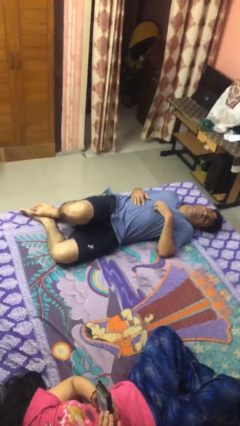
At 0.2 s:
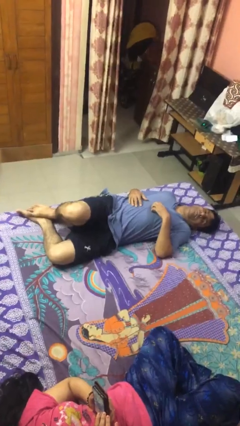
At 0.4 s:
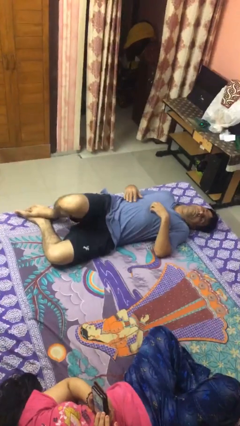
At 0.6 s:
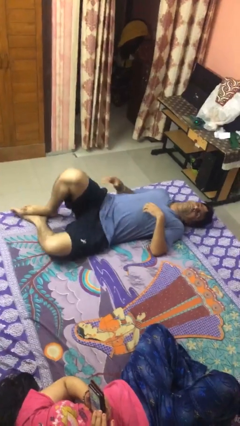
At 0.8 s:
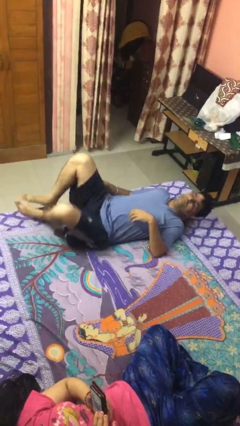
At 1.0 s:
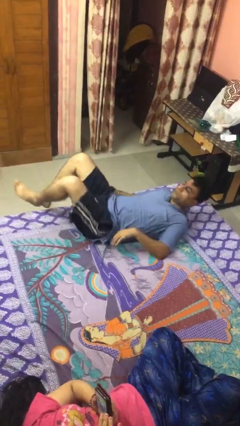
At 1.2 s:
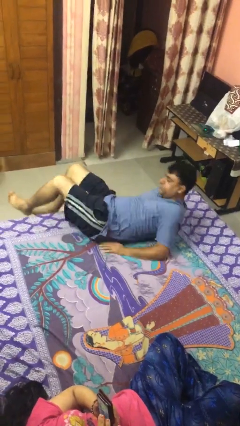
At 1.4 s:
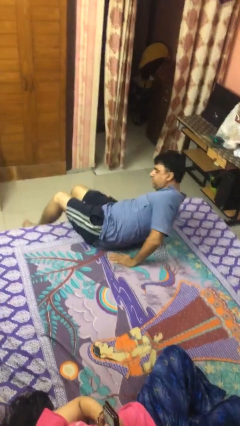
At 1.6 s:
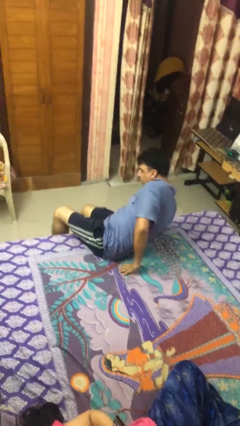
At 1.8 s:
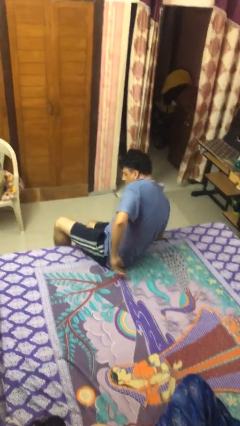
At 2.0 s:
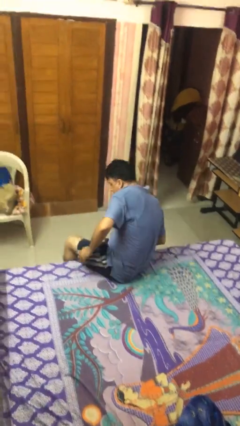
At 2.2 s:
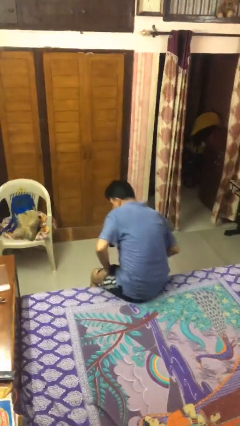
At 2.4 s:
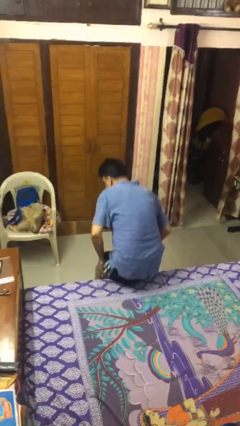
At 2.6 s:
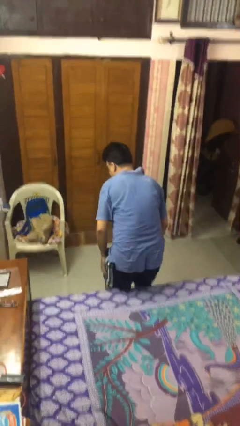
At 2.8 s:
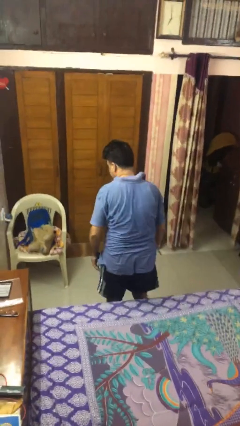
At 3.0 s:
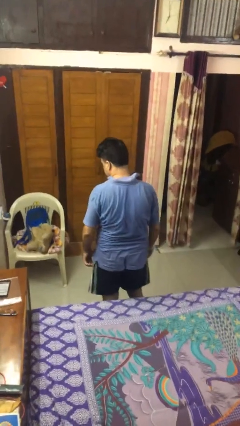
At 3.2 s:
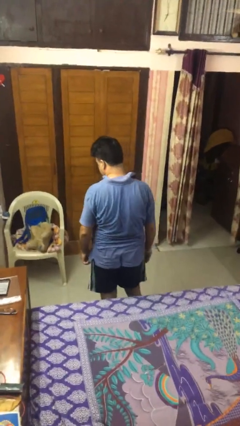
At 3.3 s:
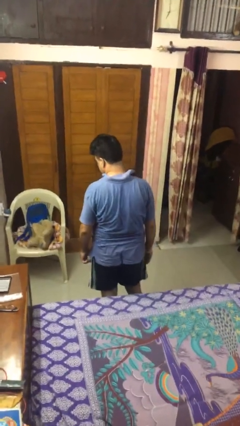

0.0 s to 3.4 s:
person stands up
